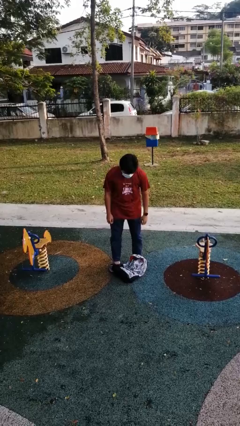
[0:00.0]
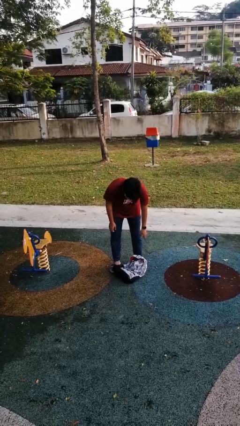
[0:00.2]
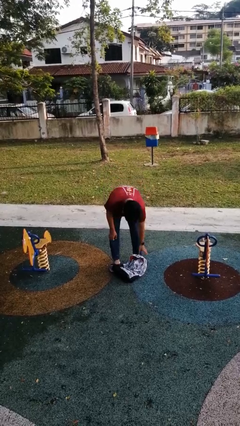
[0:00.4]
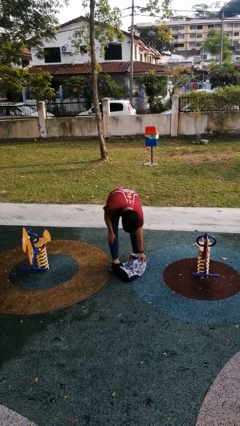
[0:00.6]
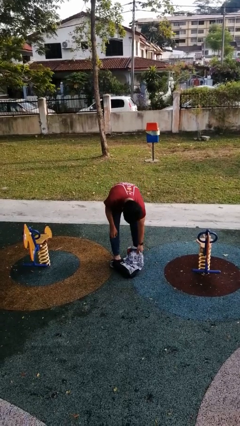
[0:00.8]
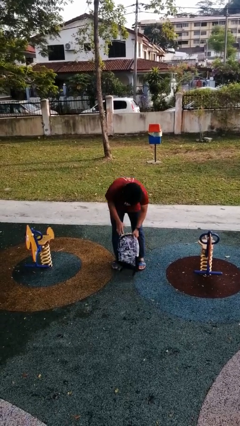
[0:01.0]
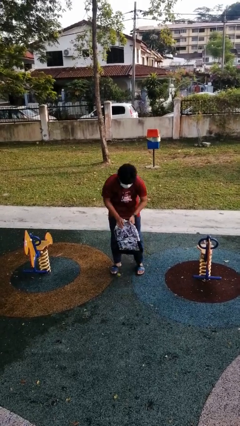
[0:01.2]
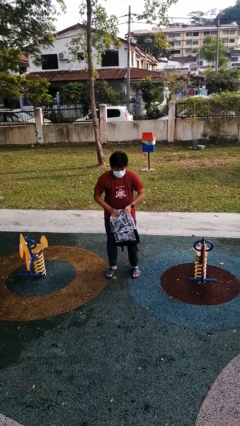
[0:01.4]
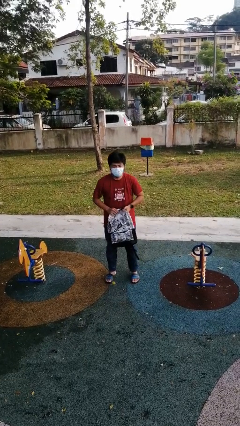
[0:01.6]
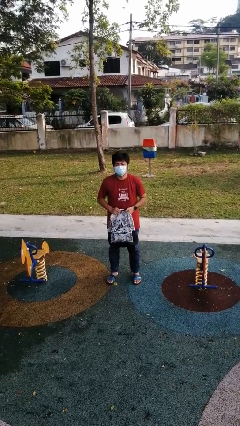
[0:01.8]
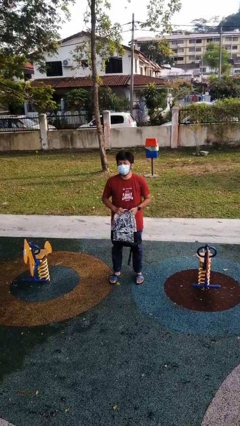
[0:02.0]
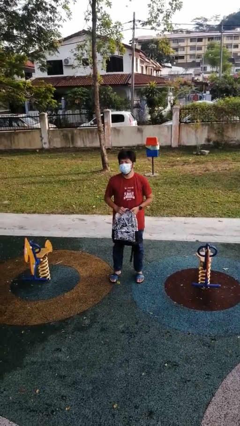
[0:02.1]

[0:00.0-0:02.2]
person picks up object from floor

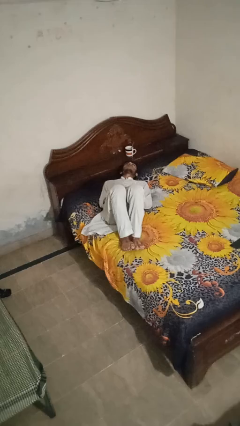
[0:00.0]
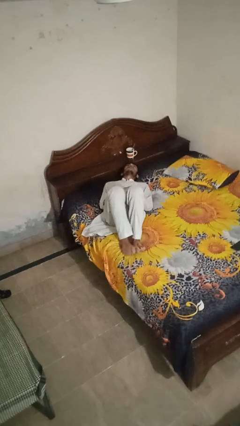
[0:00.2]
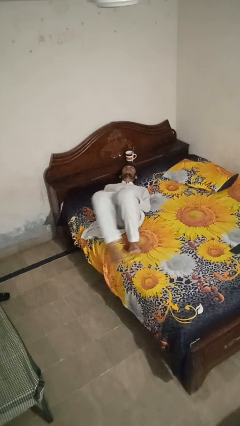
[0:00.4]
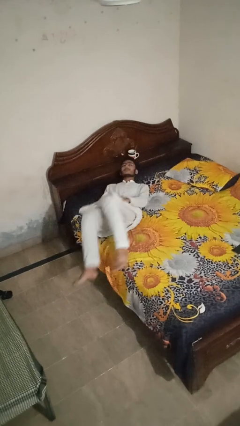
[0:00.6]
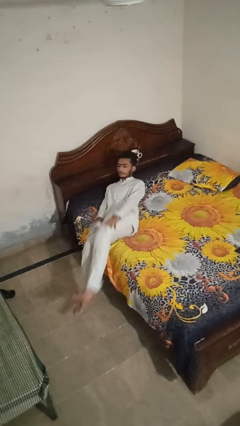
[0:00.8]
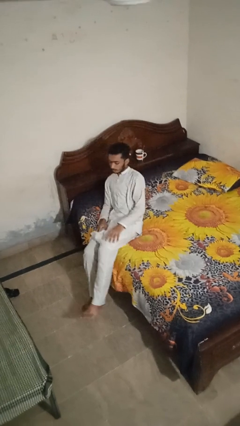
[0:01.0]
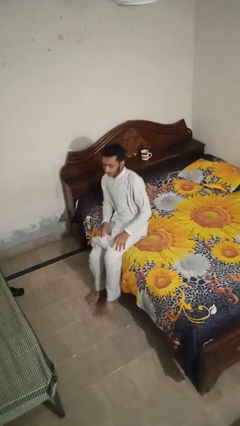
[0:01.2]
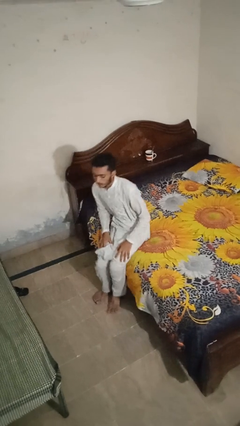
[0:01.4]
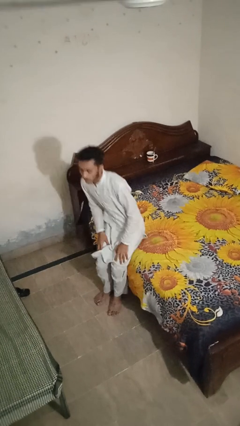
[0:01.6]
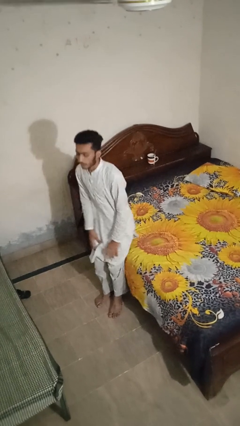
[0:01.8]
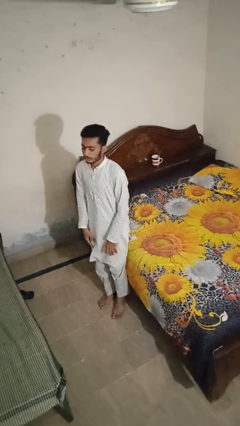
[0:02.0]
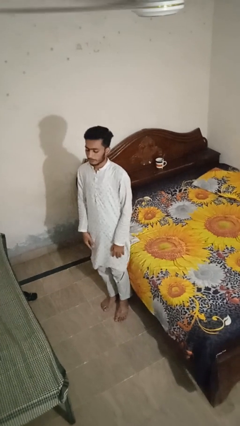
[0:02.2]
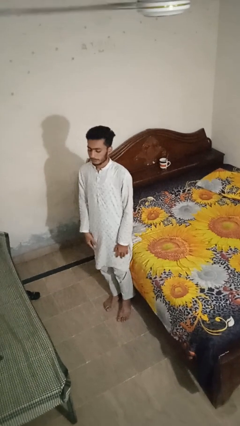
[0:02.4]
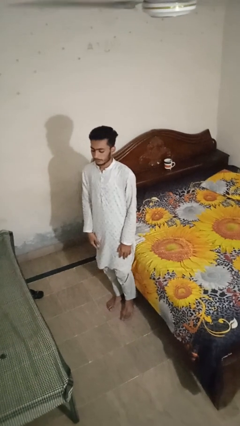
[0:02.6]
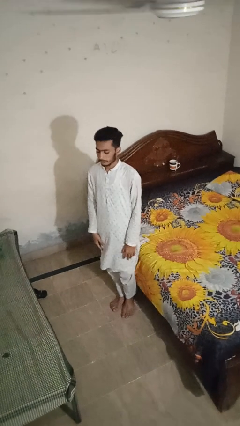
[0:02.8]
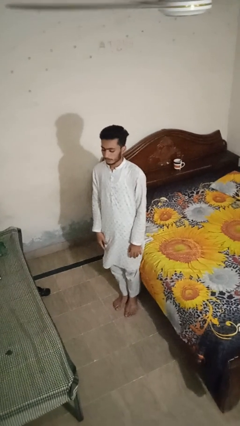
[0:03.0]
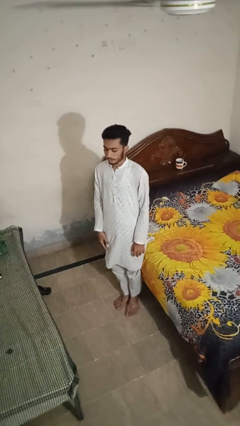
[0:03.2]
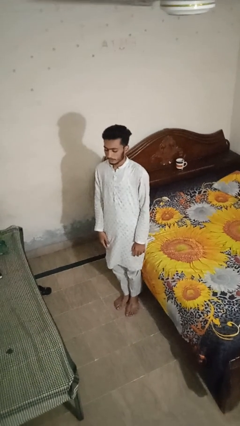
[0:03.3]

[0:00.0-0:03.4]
person stands up

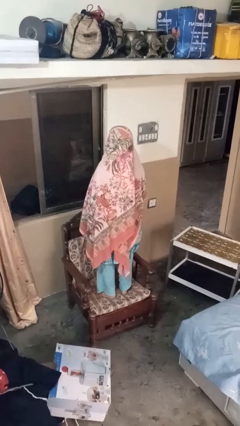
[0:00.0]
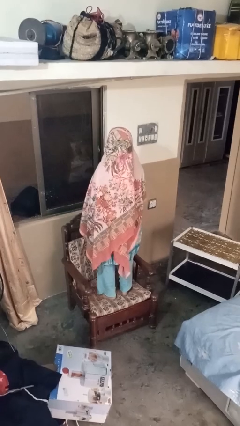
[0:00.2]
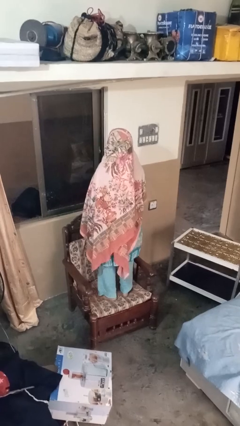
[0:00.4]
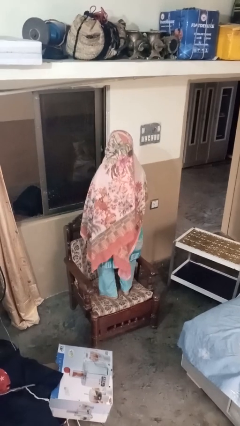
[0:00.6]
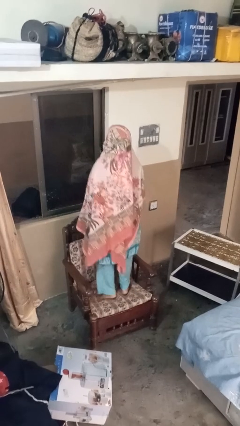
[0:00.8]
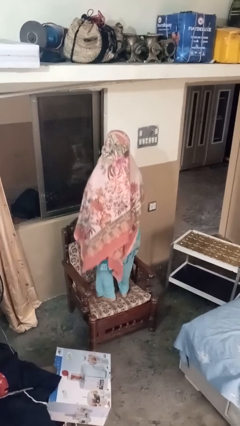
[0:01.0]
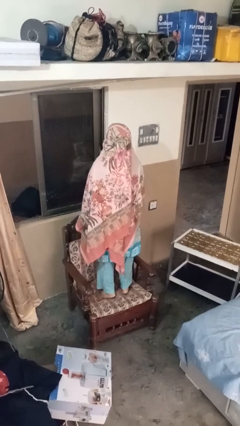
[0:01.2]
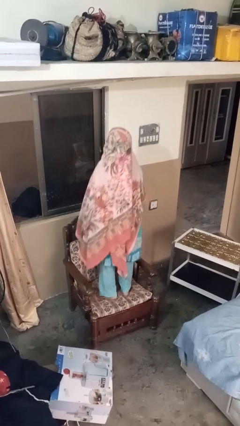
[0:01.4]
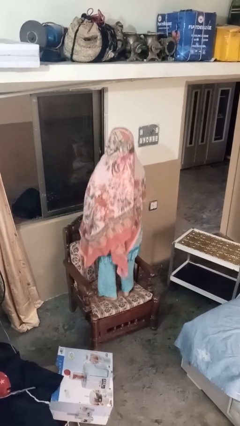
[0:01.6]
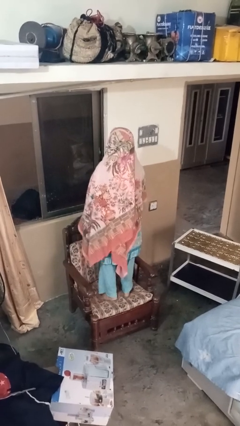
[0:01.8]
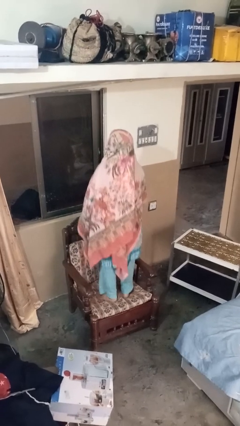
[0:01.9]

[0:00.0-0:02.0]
person jumps on couch

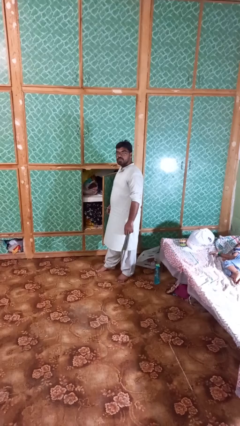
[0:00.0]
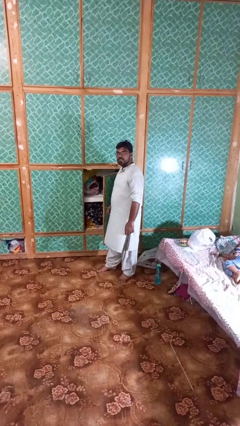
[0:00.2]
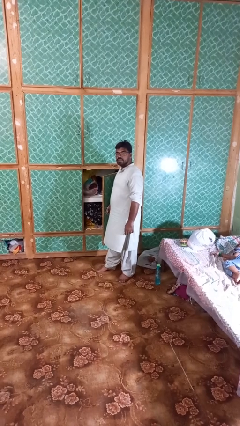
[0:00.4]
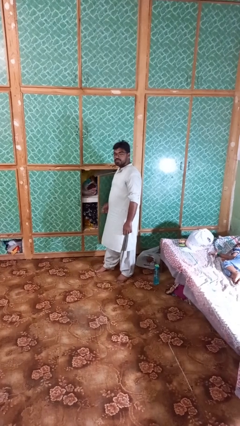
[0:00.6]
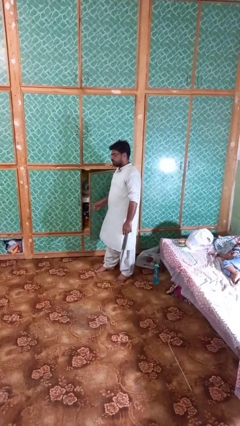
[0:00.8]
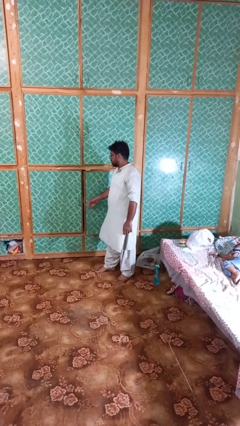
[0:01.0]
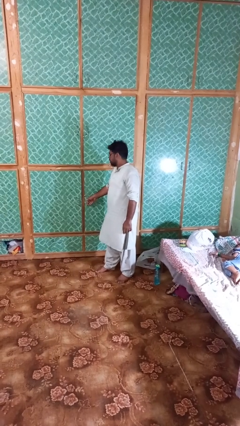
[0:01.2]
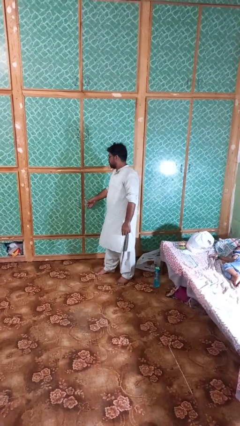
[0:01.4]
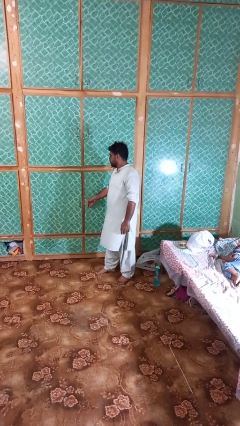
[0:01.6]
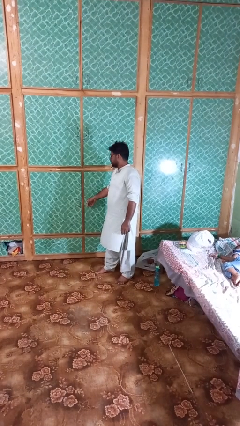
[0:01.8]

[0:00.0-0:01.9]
person closes closet door

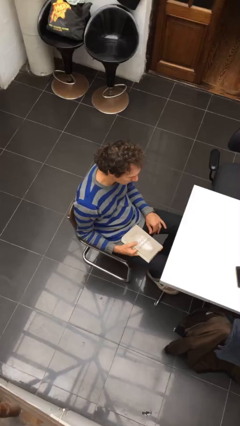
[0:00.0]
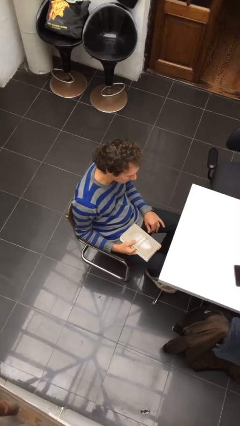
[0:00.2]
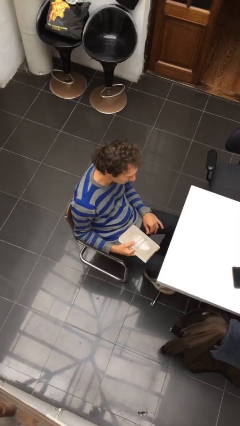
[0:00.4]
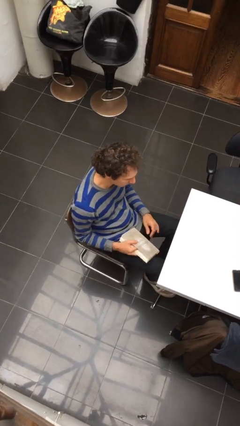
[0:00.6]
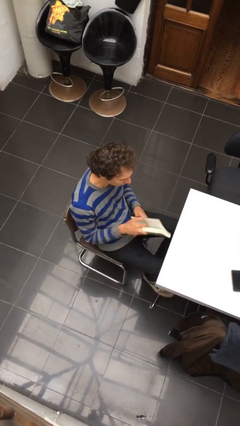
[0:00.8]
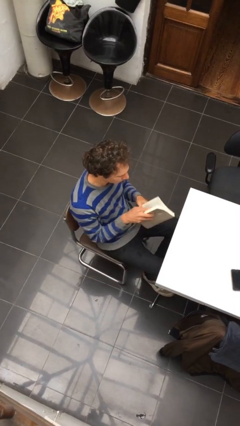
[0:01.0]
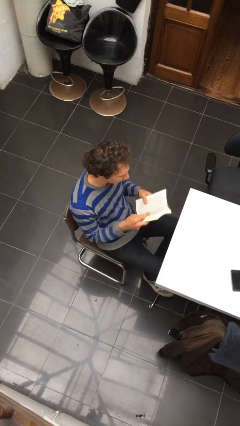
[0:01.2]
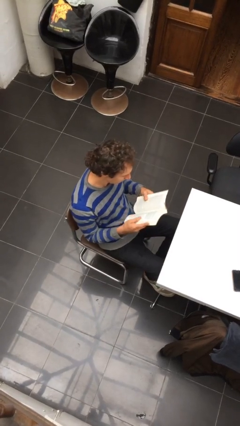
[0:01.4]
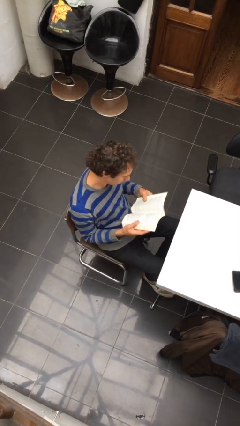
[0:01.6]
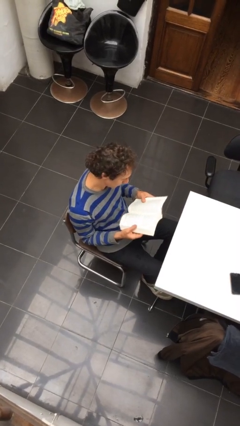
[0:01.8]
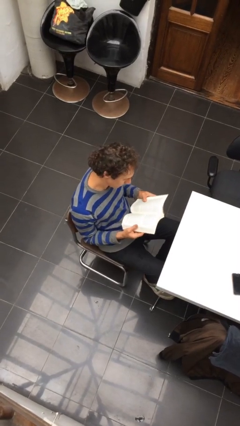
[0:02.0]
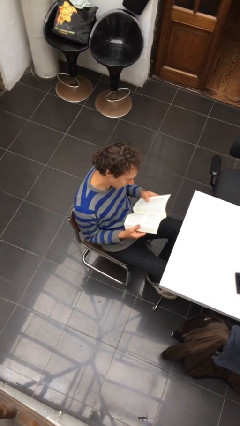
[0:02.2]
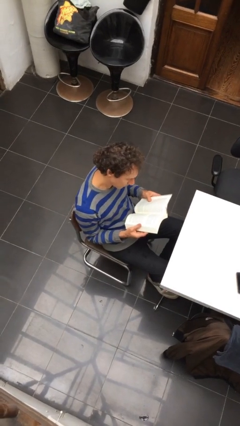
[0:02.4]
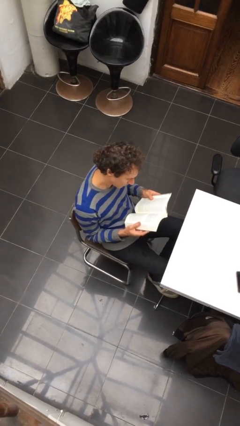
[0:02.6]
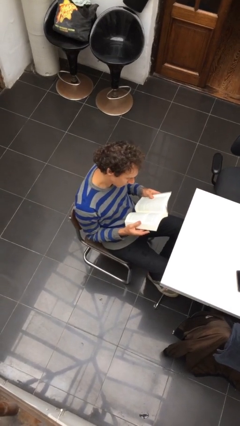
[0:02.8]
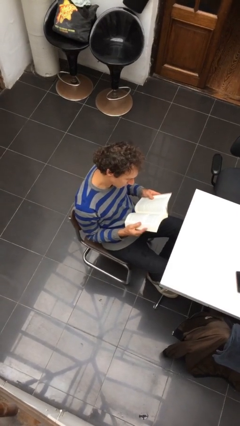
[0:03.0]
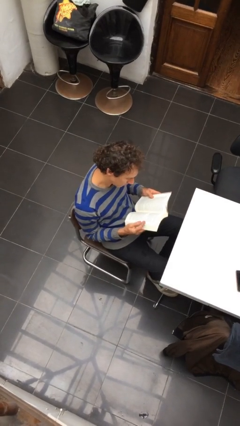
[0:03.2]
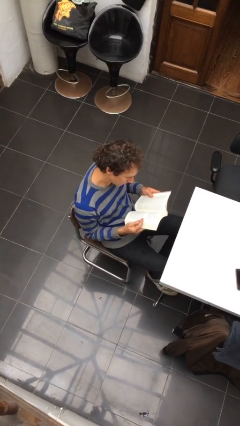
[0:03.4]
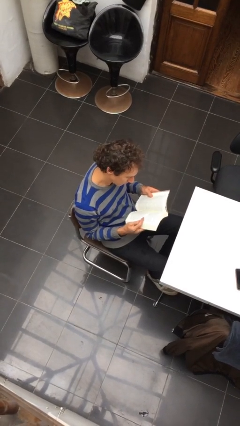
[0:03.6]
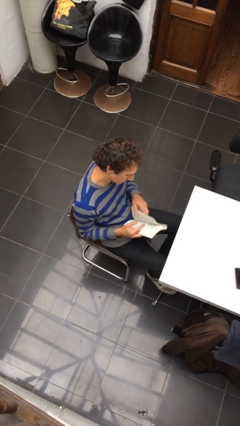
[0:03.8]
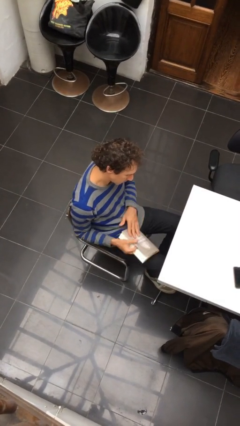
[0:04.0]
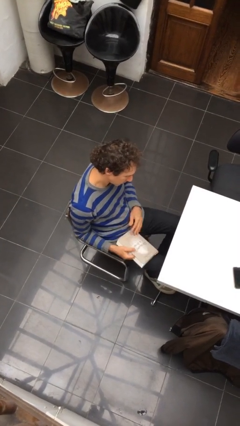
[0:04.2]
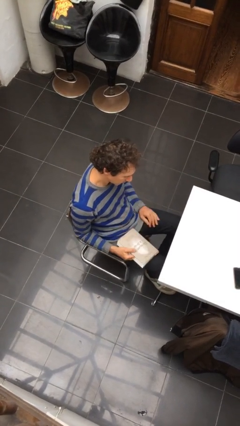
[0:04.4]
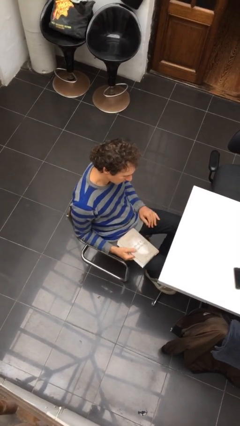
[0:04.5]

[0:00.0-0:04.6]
person reads document

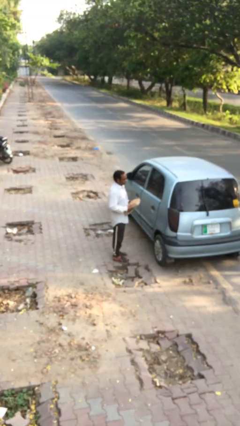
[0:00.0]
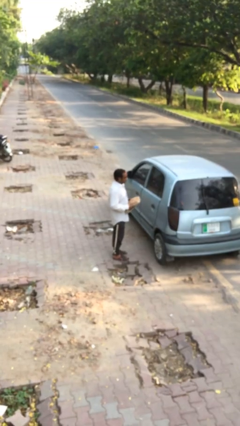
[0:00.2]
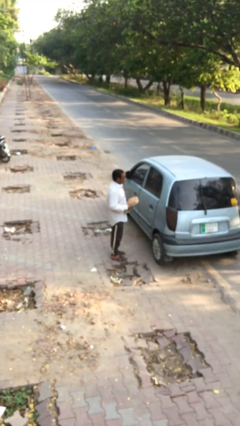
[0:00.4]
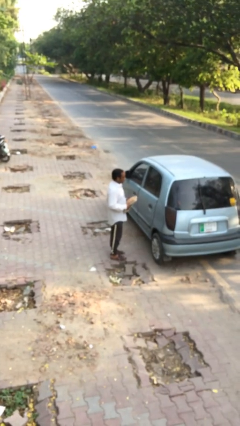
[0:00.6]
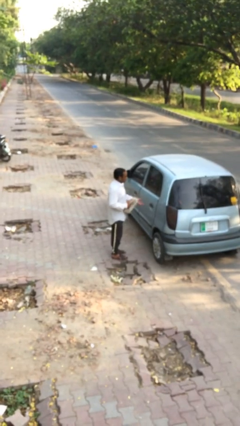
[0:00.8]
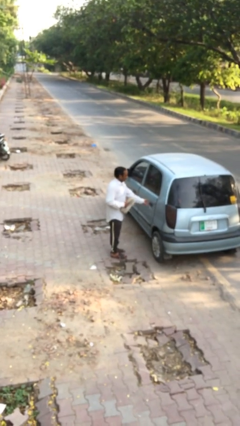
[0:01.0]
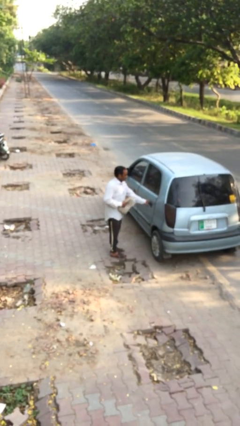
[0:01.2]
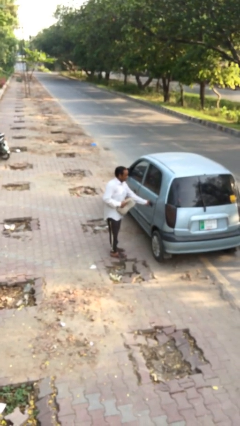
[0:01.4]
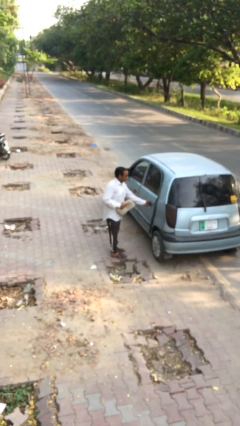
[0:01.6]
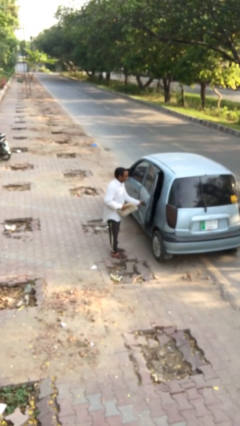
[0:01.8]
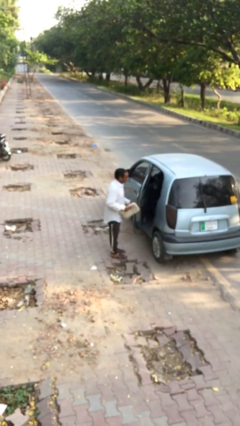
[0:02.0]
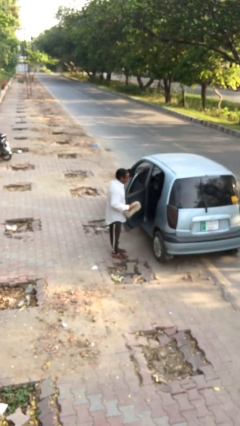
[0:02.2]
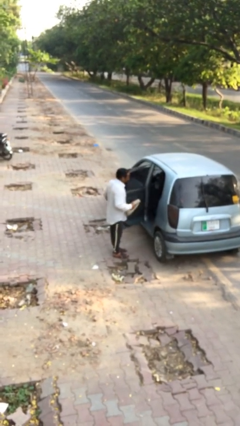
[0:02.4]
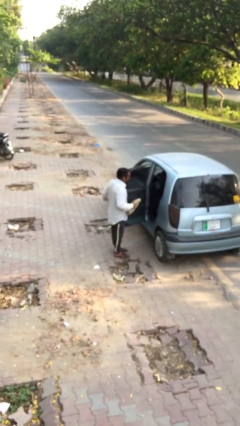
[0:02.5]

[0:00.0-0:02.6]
person opens car door

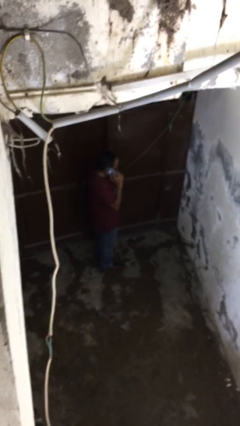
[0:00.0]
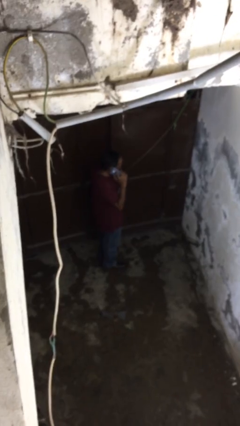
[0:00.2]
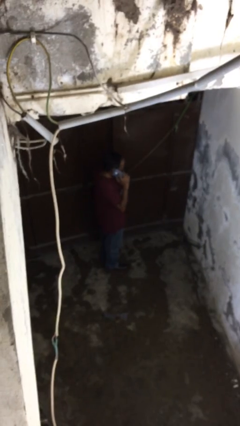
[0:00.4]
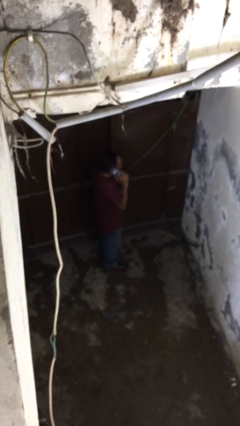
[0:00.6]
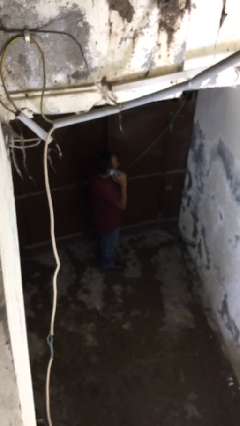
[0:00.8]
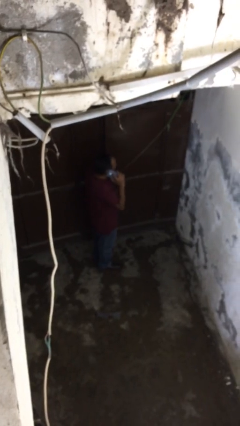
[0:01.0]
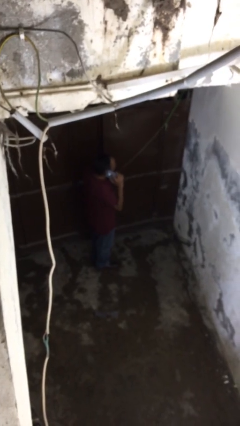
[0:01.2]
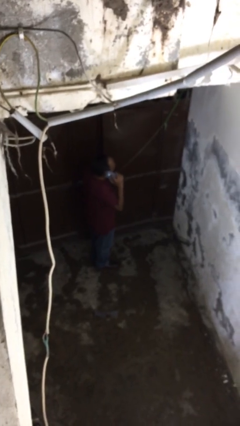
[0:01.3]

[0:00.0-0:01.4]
person opens facility door
